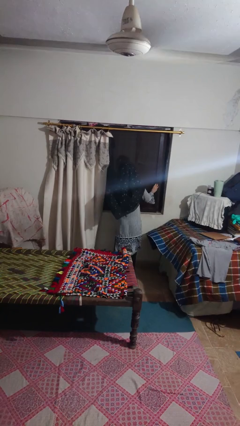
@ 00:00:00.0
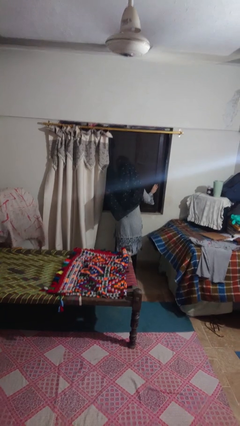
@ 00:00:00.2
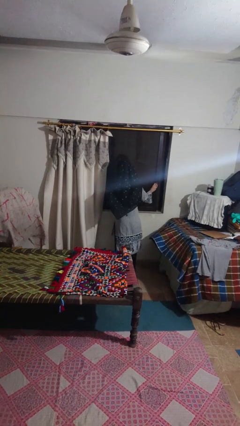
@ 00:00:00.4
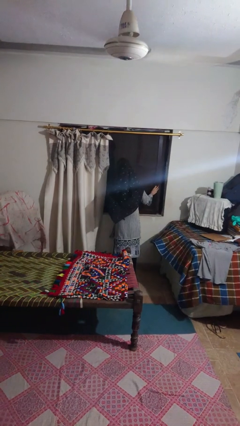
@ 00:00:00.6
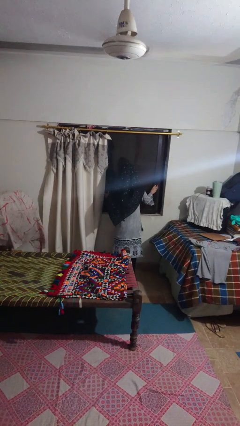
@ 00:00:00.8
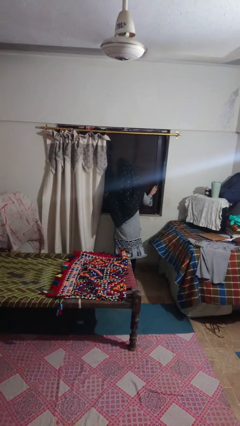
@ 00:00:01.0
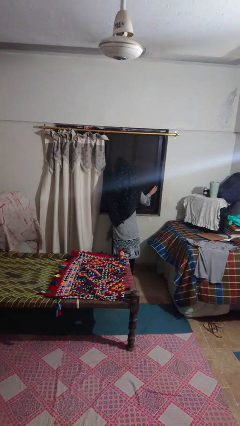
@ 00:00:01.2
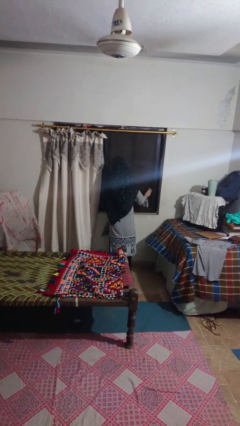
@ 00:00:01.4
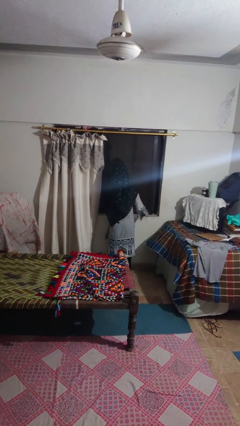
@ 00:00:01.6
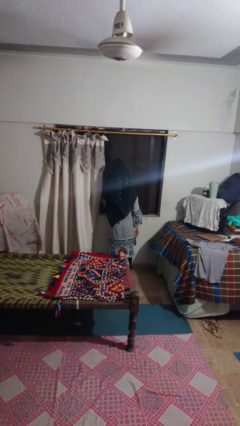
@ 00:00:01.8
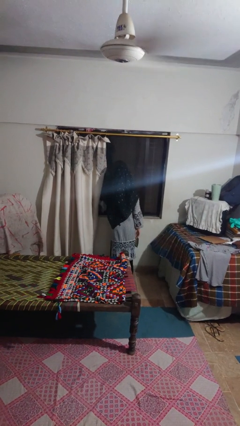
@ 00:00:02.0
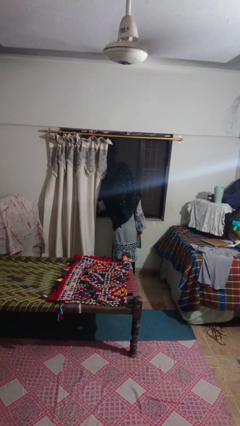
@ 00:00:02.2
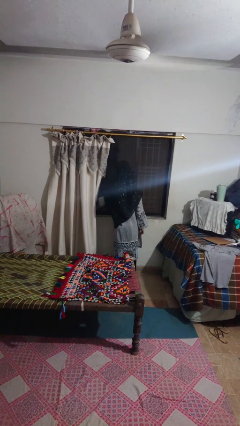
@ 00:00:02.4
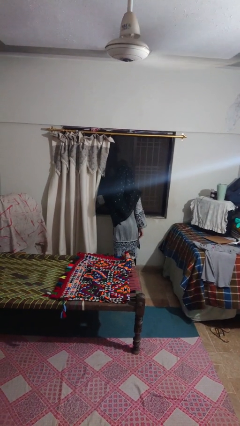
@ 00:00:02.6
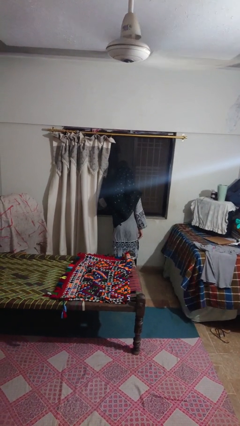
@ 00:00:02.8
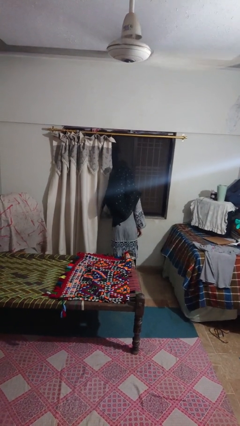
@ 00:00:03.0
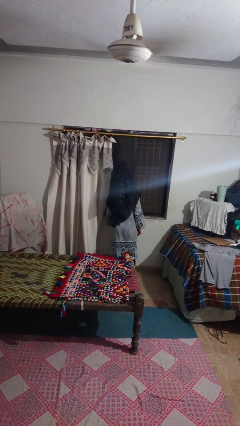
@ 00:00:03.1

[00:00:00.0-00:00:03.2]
person opens home window

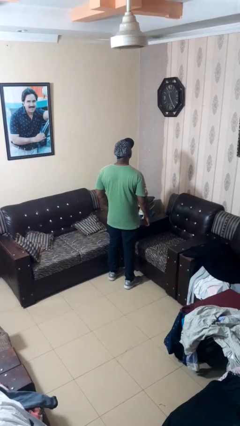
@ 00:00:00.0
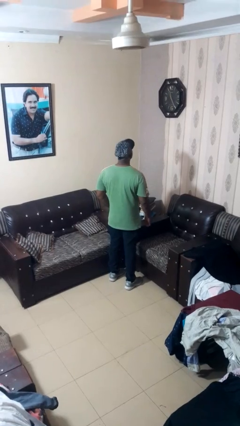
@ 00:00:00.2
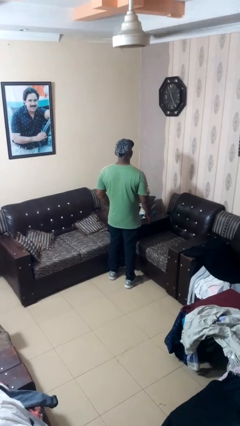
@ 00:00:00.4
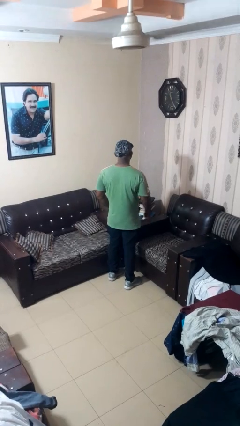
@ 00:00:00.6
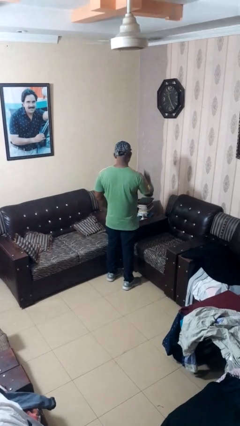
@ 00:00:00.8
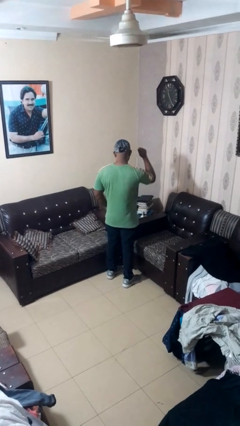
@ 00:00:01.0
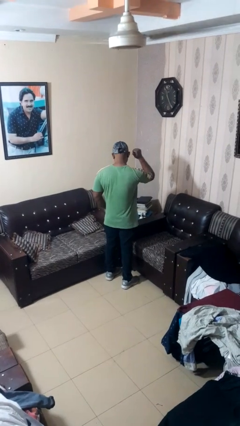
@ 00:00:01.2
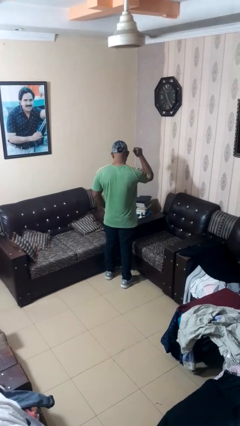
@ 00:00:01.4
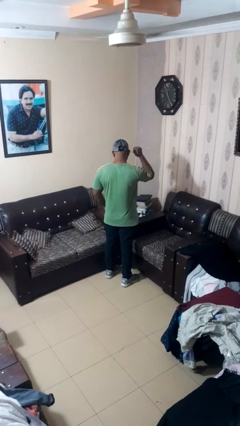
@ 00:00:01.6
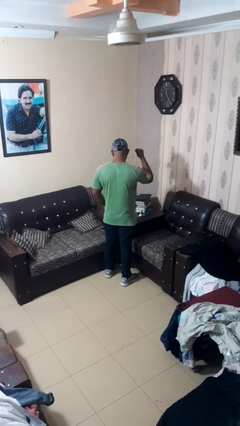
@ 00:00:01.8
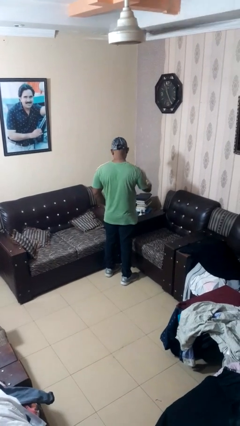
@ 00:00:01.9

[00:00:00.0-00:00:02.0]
person gestures behind me

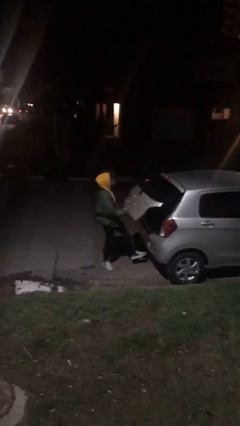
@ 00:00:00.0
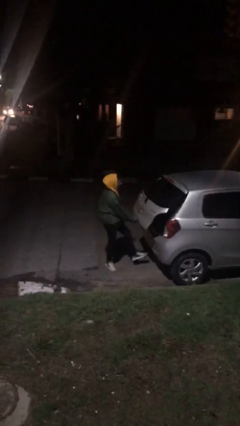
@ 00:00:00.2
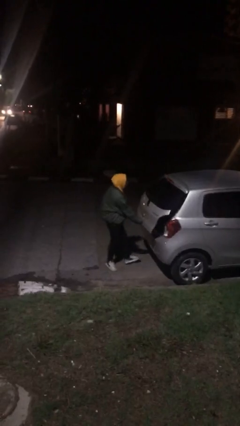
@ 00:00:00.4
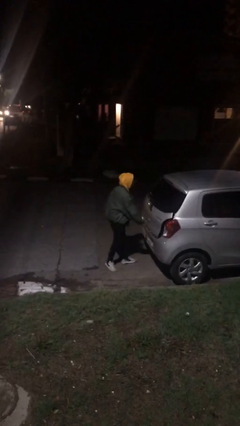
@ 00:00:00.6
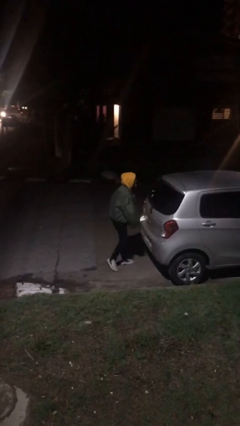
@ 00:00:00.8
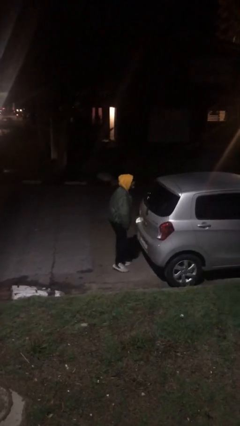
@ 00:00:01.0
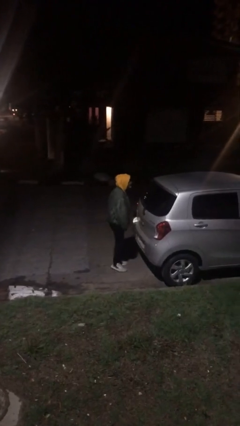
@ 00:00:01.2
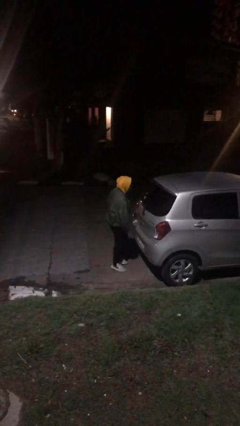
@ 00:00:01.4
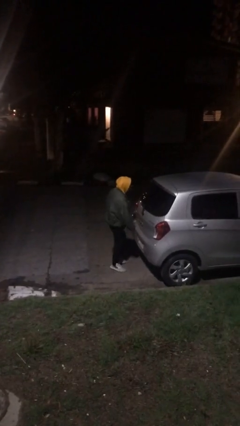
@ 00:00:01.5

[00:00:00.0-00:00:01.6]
person closes car trunk

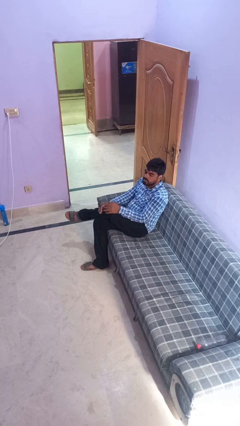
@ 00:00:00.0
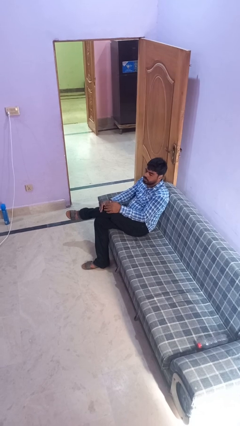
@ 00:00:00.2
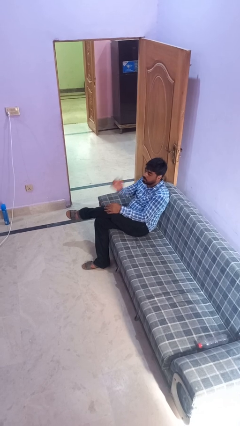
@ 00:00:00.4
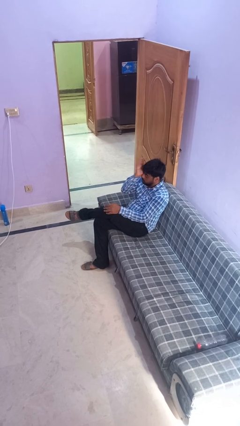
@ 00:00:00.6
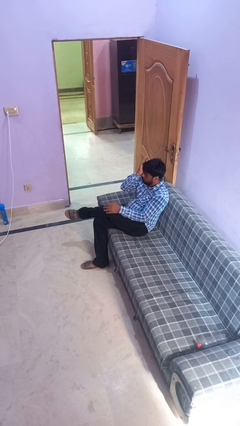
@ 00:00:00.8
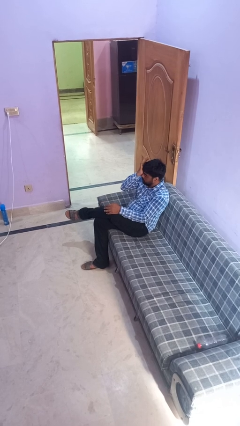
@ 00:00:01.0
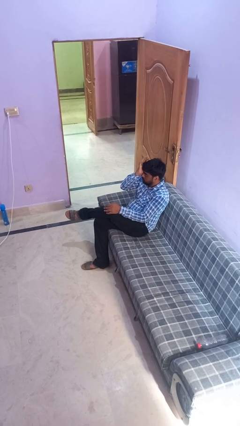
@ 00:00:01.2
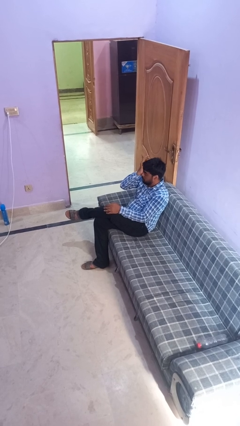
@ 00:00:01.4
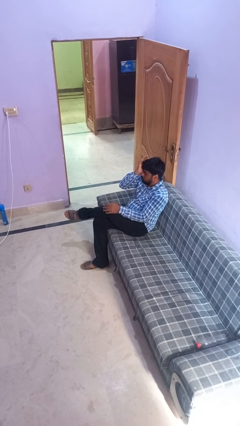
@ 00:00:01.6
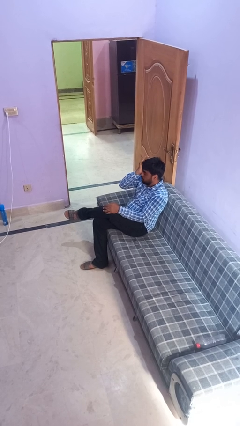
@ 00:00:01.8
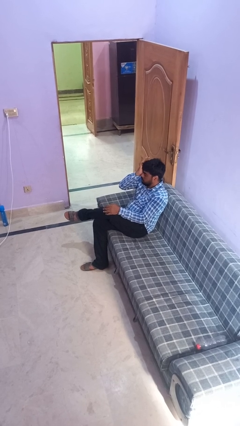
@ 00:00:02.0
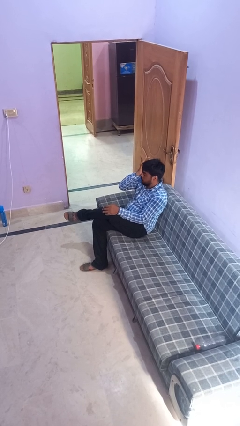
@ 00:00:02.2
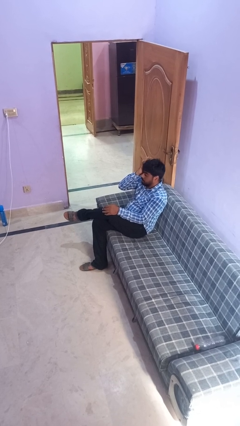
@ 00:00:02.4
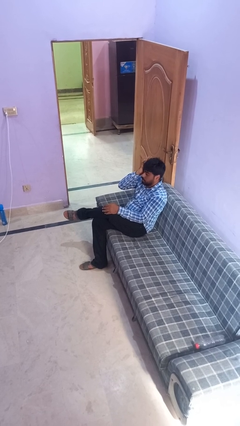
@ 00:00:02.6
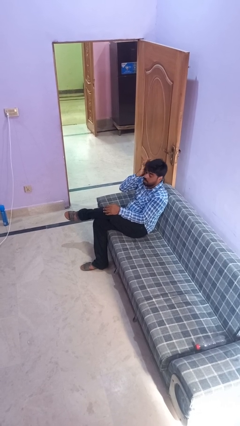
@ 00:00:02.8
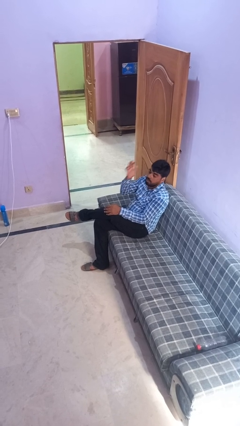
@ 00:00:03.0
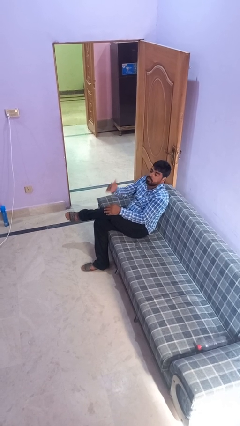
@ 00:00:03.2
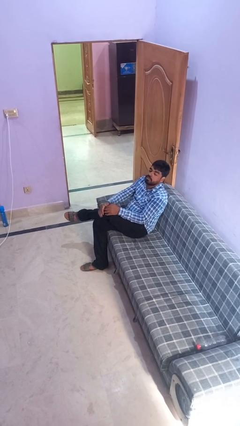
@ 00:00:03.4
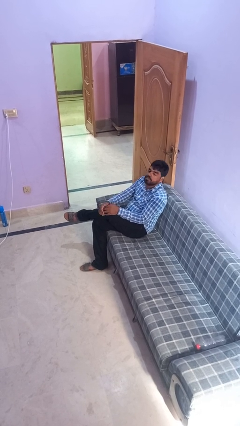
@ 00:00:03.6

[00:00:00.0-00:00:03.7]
person rubs eyes

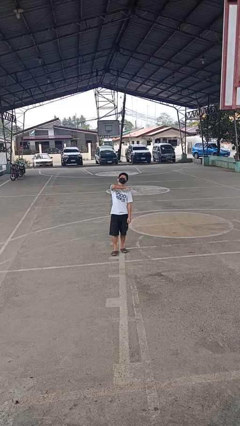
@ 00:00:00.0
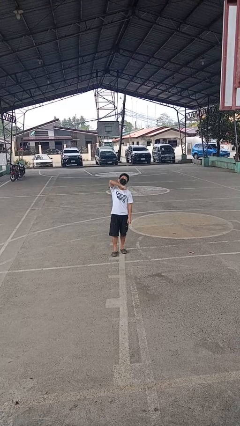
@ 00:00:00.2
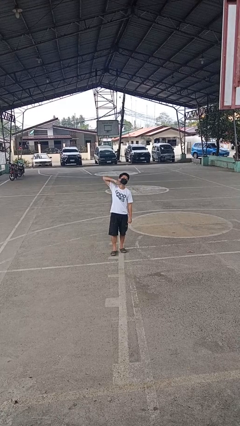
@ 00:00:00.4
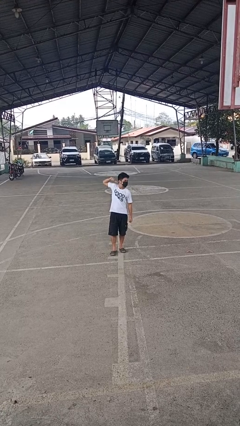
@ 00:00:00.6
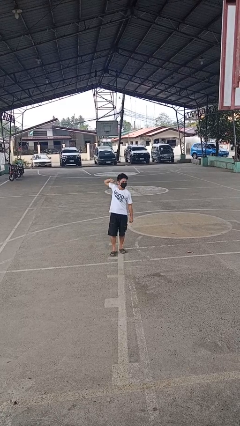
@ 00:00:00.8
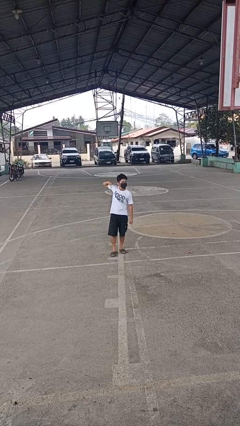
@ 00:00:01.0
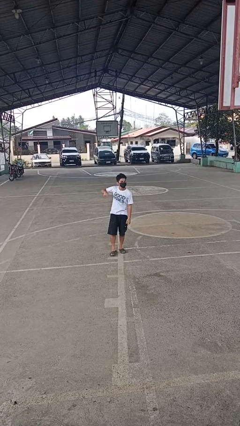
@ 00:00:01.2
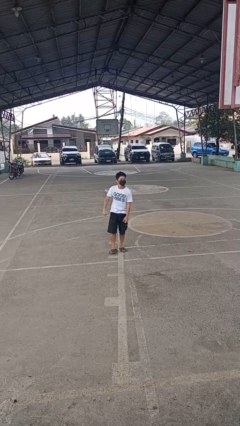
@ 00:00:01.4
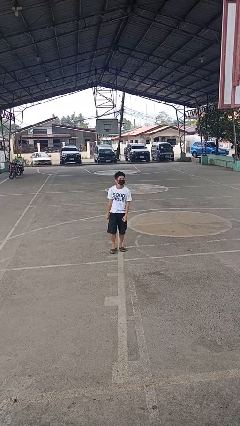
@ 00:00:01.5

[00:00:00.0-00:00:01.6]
person gestures cut

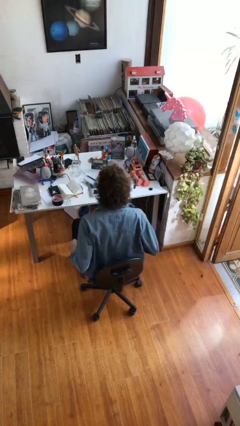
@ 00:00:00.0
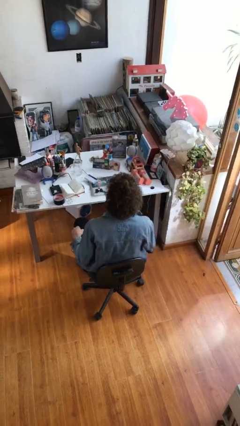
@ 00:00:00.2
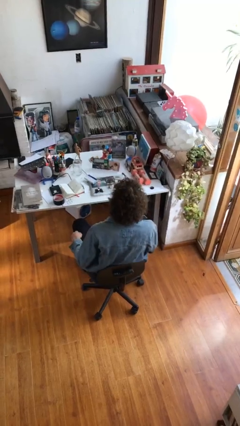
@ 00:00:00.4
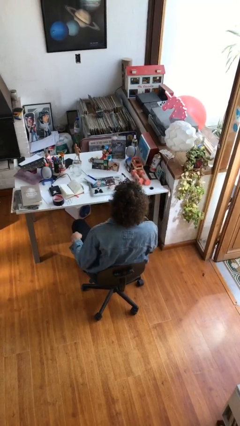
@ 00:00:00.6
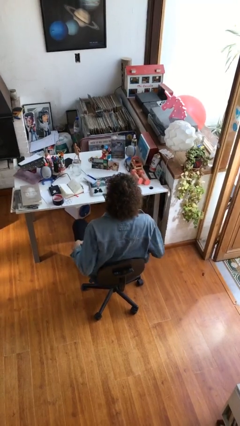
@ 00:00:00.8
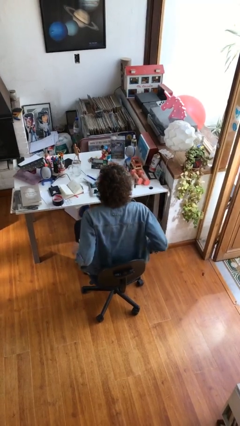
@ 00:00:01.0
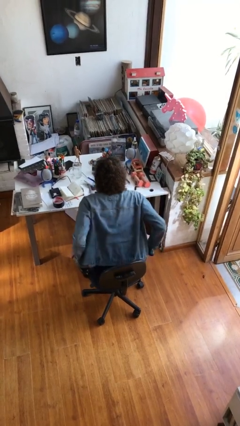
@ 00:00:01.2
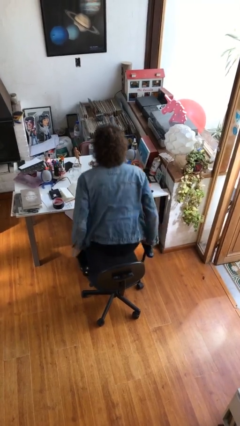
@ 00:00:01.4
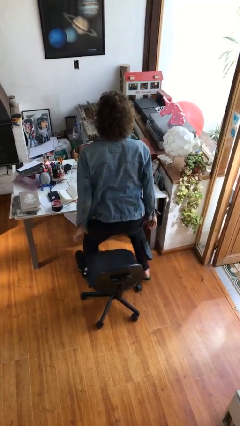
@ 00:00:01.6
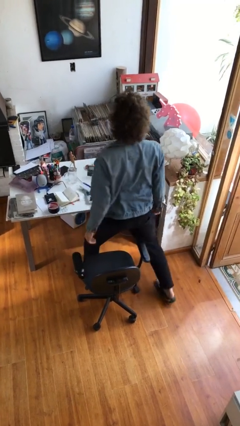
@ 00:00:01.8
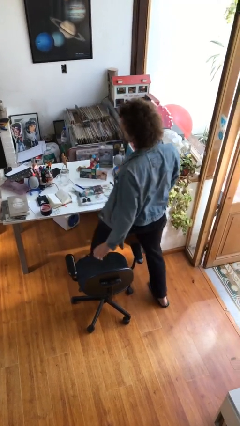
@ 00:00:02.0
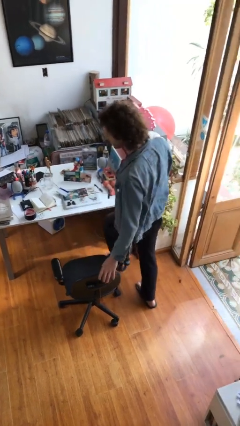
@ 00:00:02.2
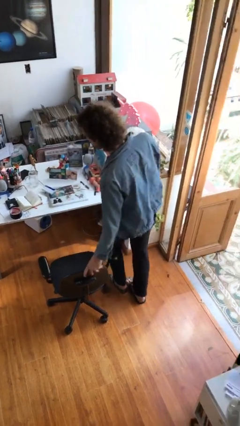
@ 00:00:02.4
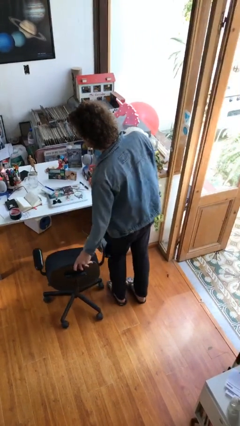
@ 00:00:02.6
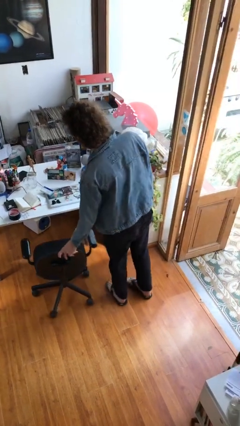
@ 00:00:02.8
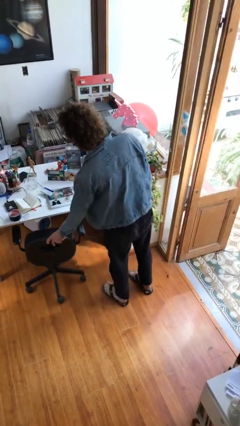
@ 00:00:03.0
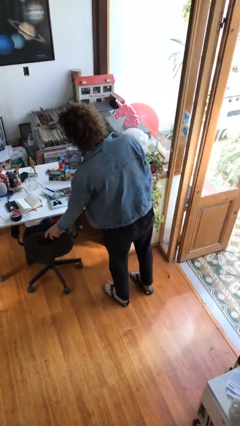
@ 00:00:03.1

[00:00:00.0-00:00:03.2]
person stands up

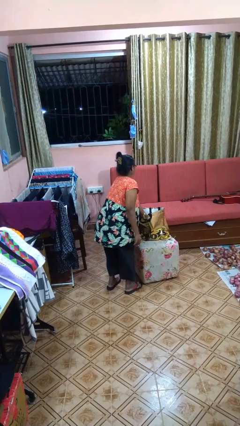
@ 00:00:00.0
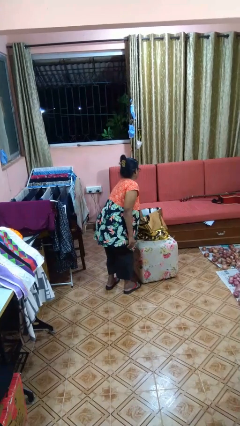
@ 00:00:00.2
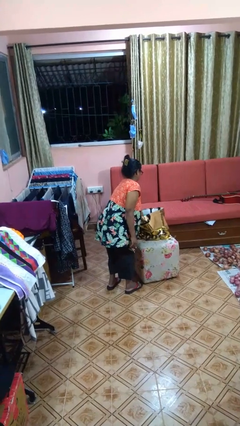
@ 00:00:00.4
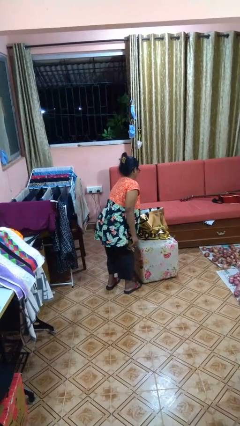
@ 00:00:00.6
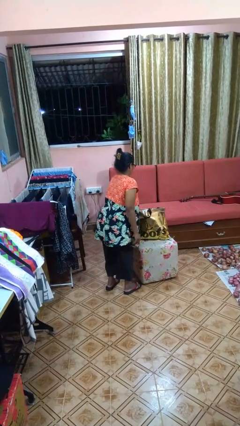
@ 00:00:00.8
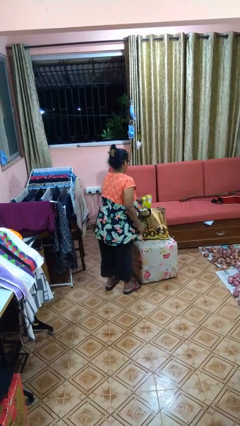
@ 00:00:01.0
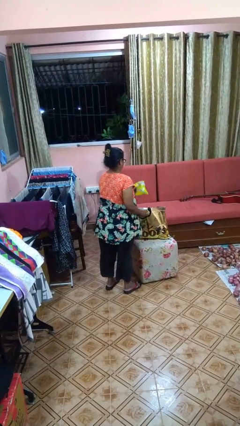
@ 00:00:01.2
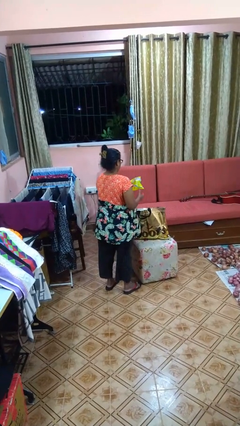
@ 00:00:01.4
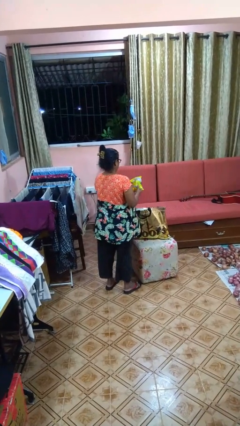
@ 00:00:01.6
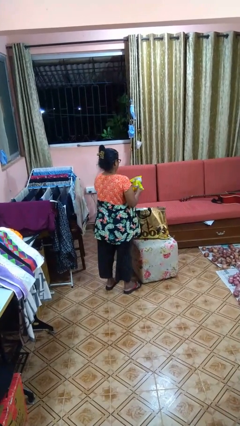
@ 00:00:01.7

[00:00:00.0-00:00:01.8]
person takes object from bag
